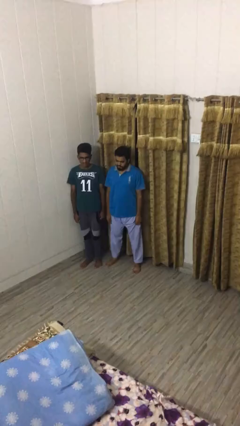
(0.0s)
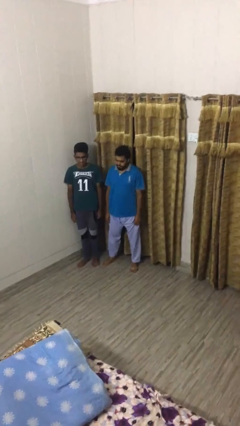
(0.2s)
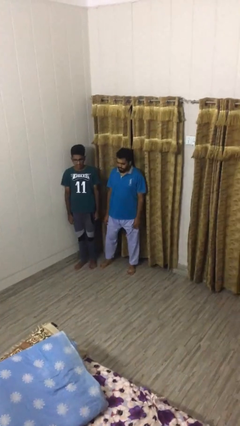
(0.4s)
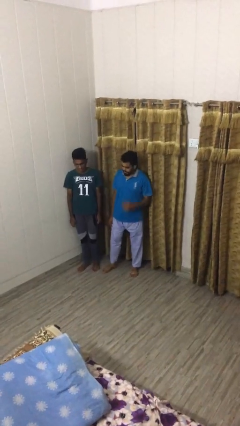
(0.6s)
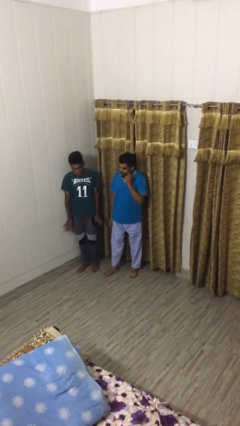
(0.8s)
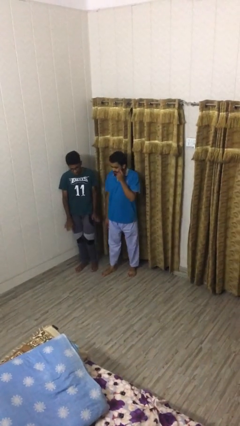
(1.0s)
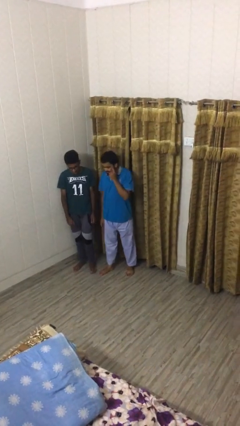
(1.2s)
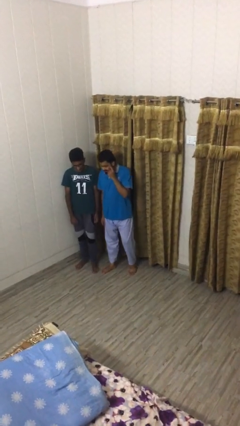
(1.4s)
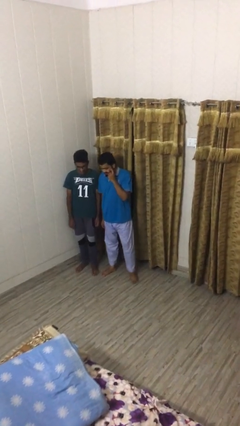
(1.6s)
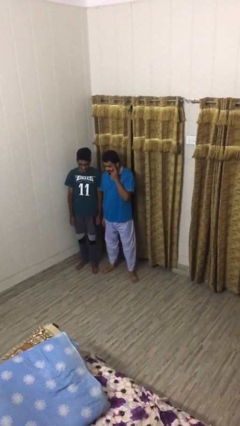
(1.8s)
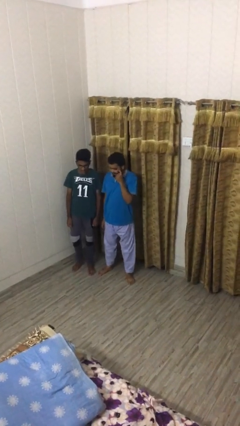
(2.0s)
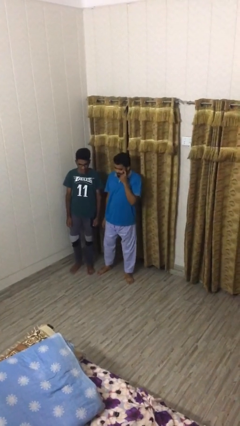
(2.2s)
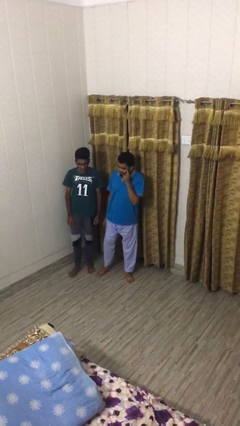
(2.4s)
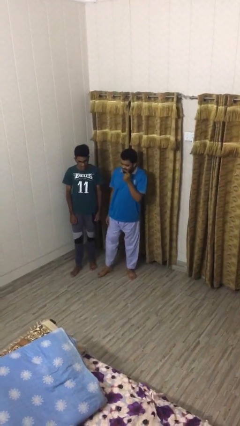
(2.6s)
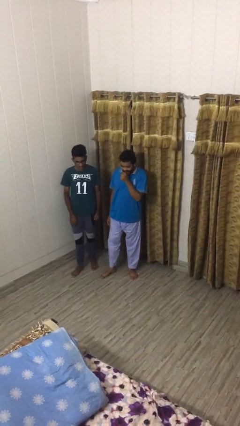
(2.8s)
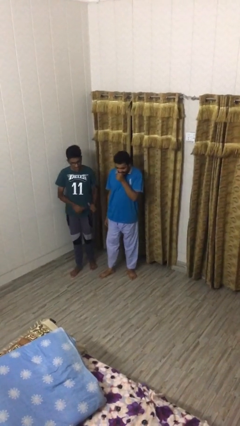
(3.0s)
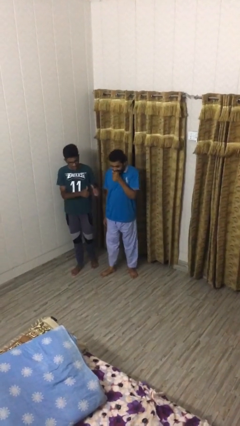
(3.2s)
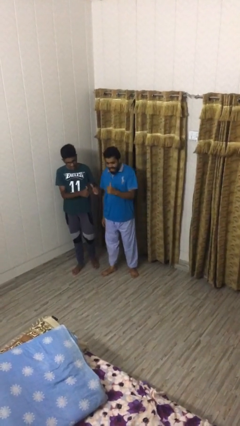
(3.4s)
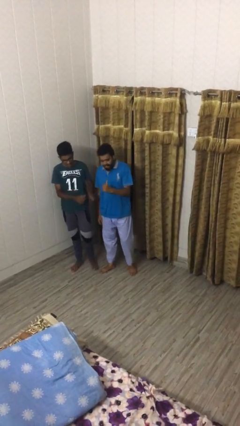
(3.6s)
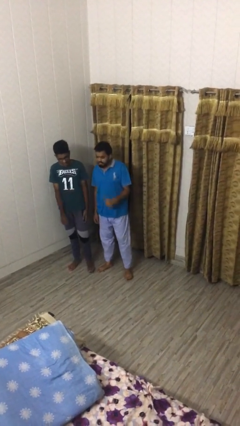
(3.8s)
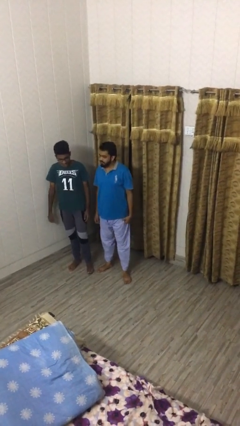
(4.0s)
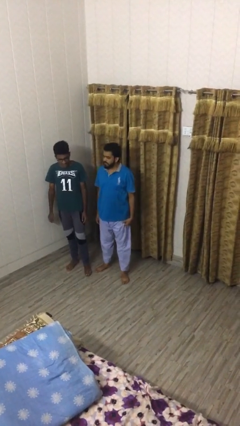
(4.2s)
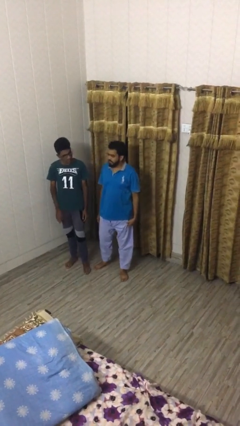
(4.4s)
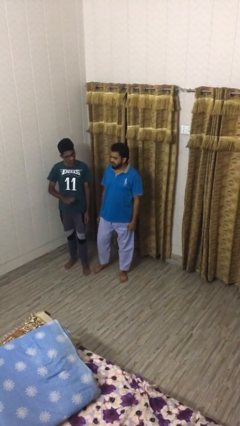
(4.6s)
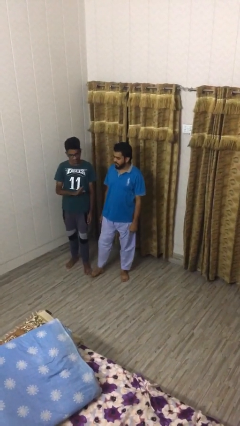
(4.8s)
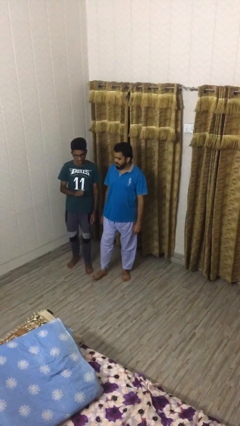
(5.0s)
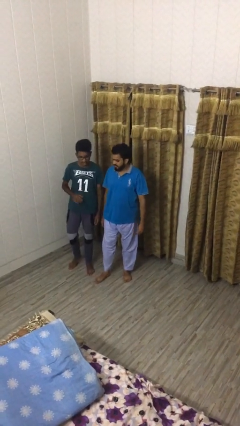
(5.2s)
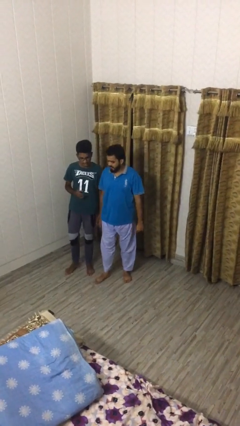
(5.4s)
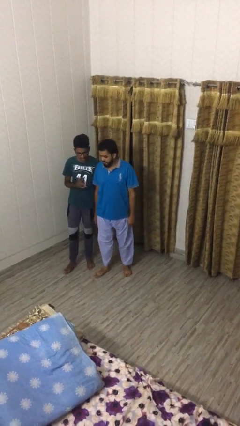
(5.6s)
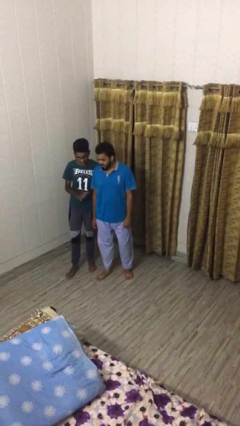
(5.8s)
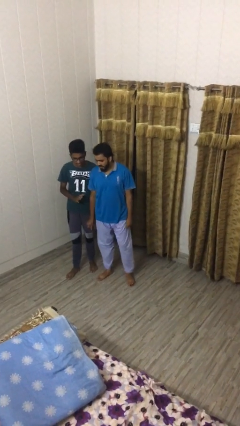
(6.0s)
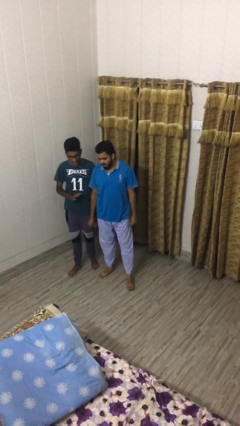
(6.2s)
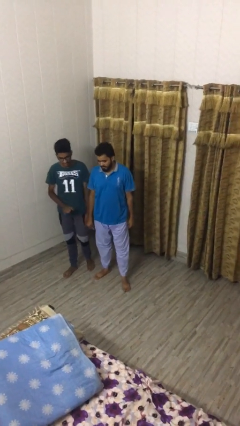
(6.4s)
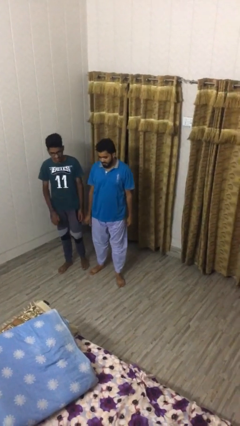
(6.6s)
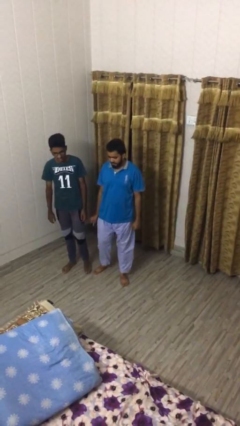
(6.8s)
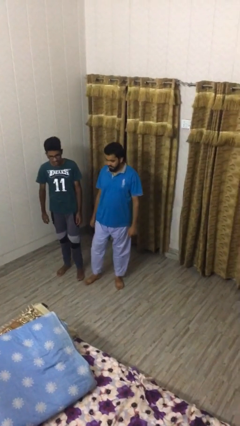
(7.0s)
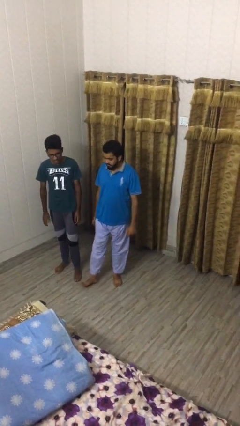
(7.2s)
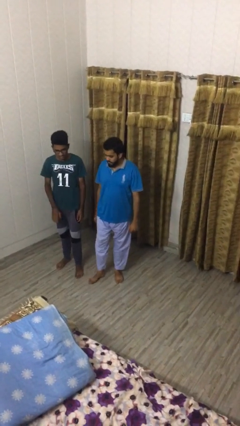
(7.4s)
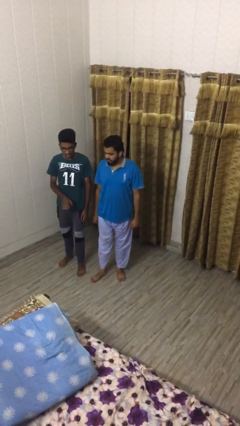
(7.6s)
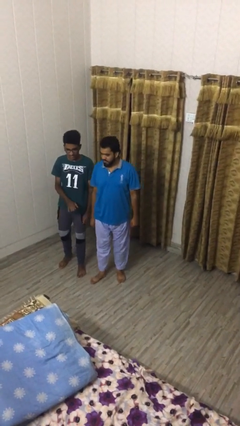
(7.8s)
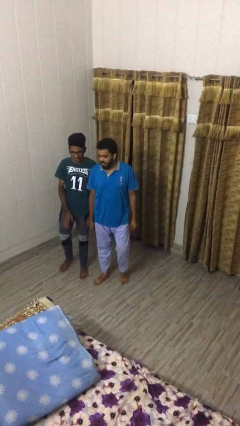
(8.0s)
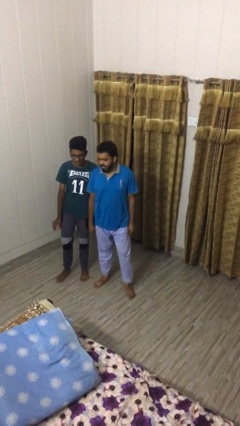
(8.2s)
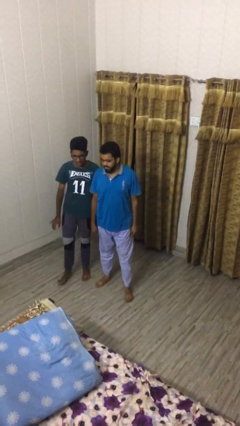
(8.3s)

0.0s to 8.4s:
person talks to person

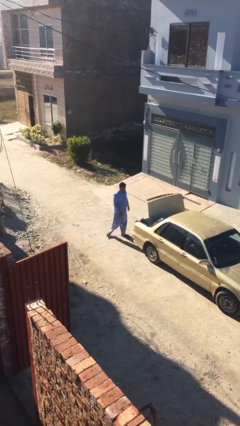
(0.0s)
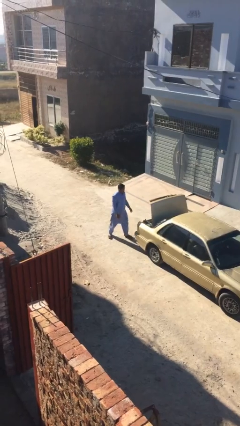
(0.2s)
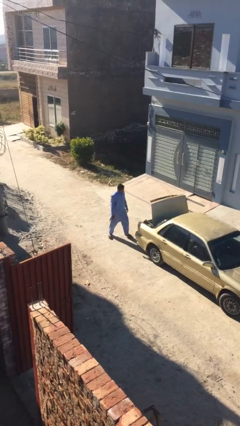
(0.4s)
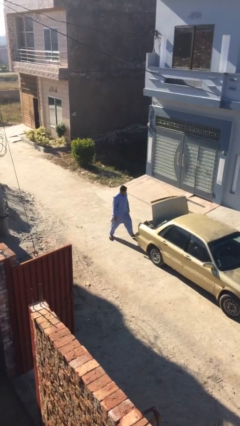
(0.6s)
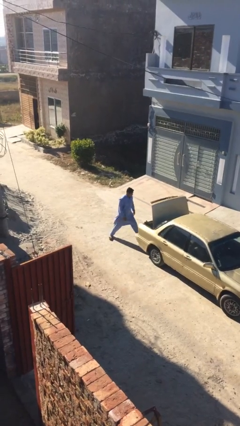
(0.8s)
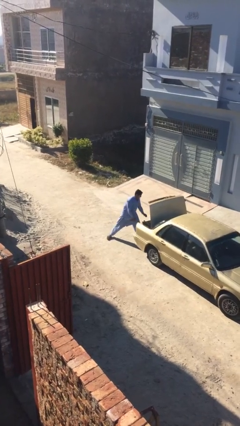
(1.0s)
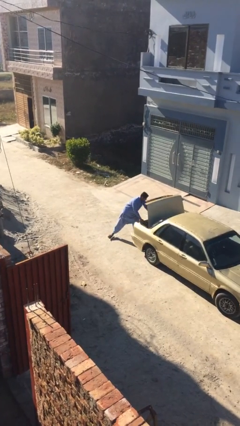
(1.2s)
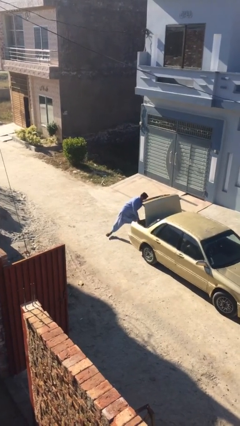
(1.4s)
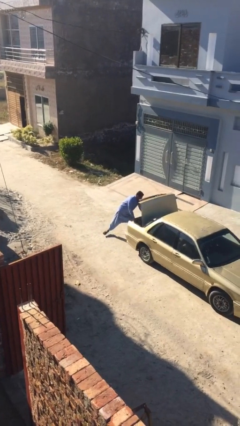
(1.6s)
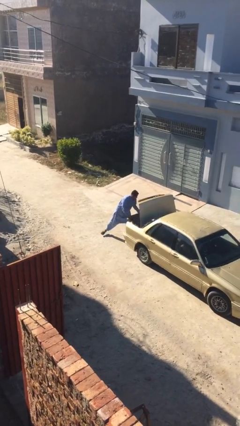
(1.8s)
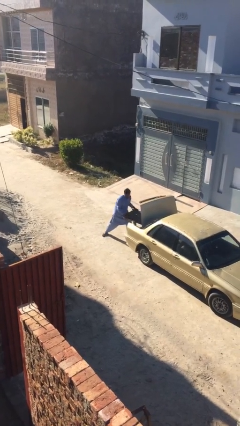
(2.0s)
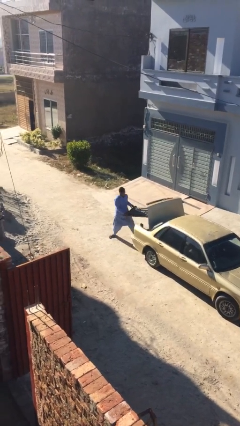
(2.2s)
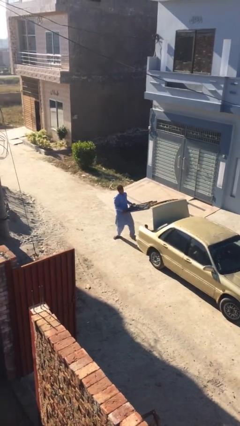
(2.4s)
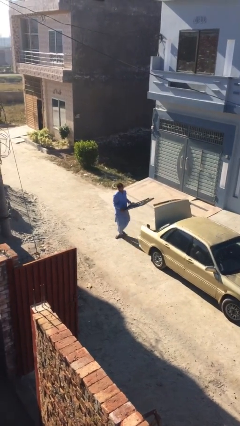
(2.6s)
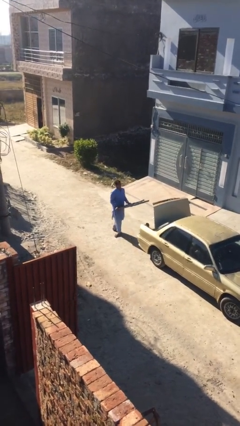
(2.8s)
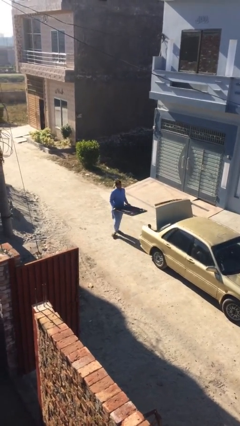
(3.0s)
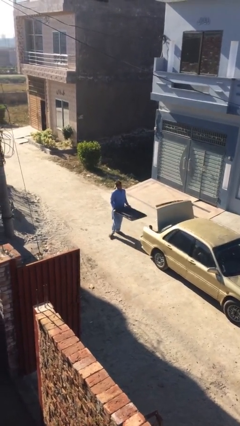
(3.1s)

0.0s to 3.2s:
person unloads car

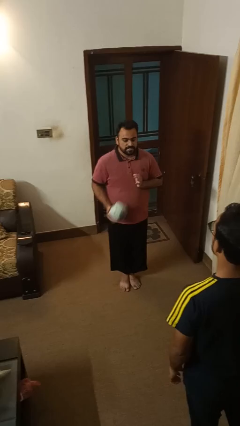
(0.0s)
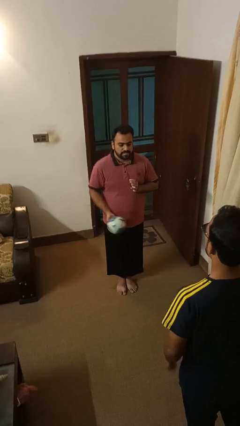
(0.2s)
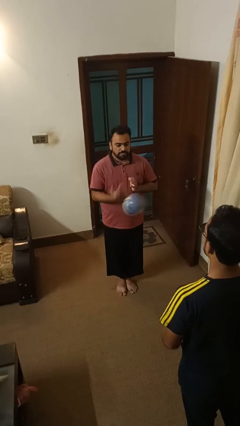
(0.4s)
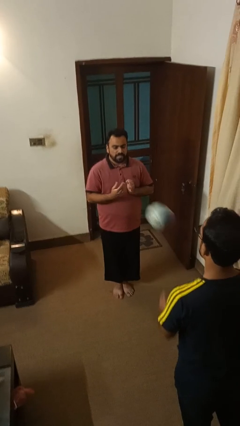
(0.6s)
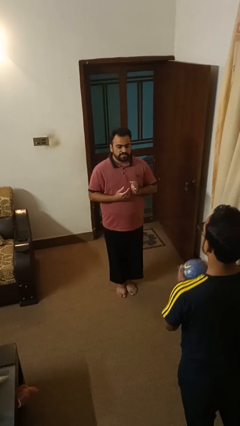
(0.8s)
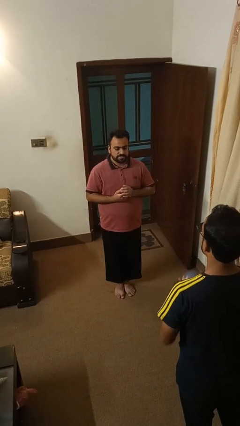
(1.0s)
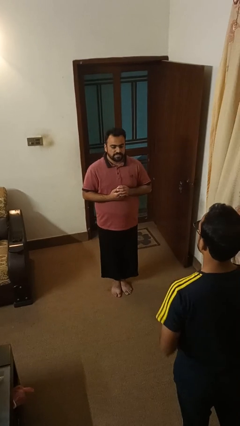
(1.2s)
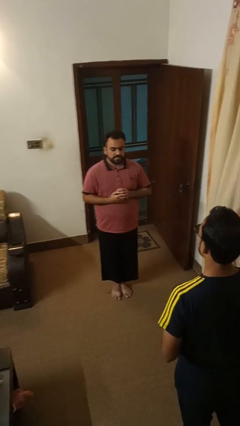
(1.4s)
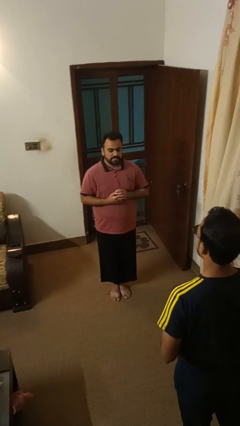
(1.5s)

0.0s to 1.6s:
person throws object to person

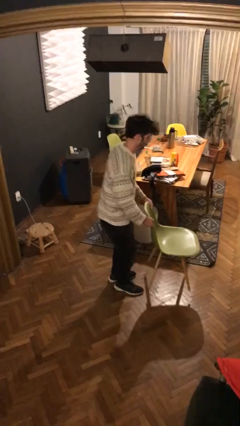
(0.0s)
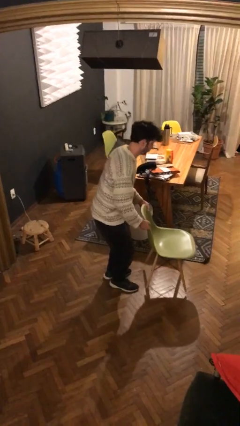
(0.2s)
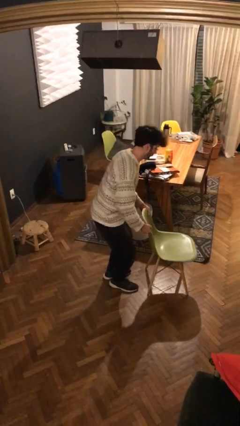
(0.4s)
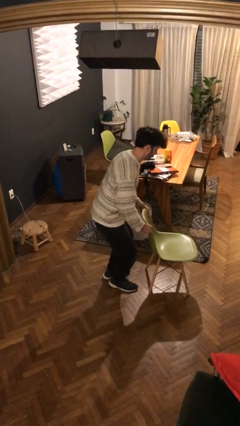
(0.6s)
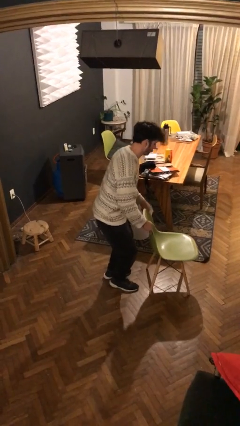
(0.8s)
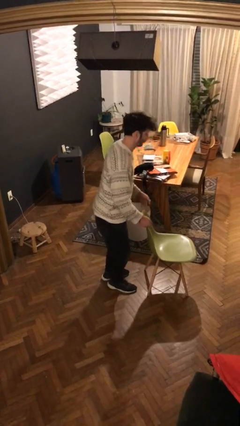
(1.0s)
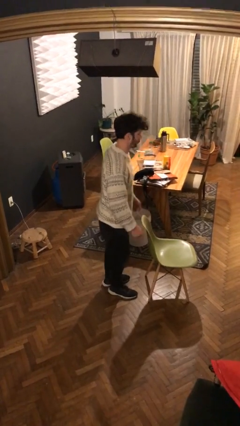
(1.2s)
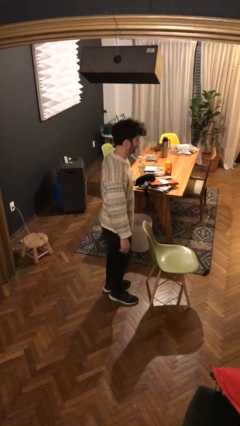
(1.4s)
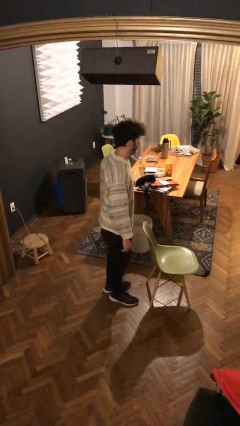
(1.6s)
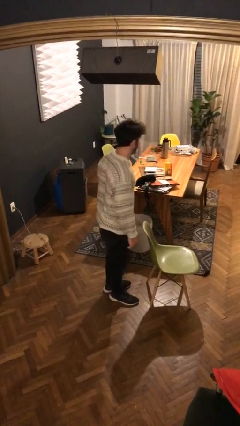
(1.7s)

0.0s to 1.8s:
person puts down object on floor

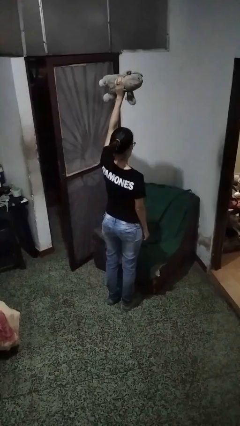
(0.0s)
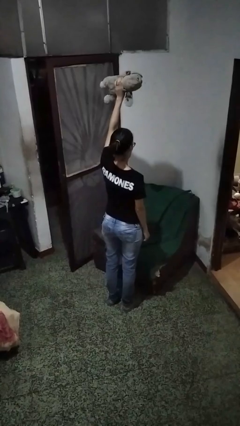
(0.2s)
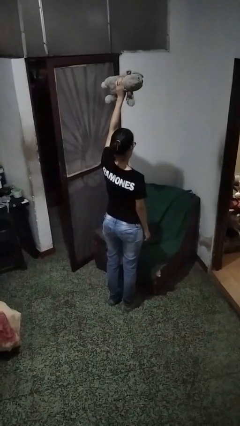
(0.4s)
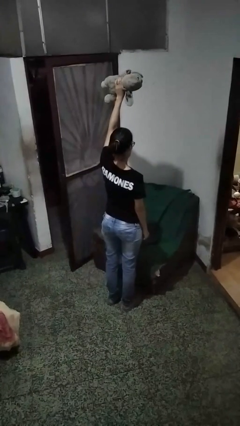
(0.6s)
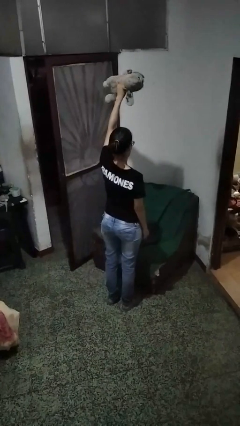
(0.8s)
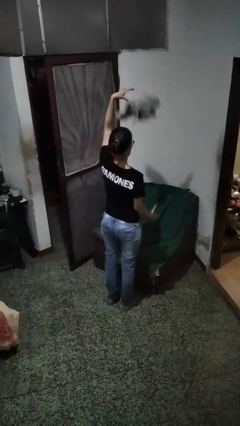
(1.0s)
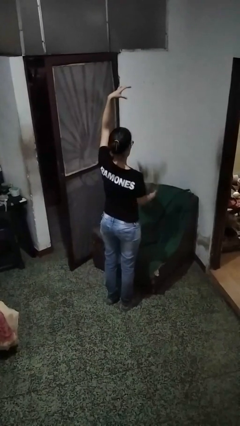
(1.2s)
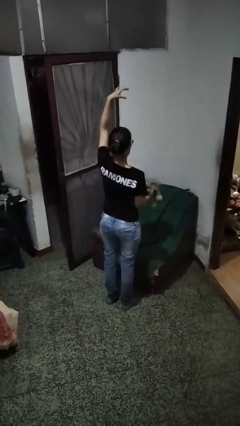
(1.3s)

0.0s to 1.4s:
person drops object

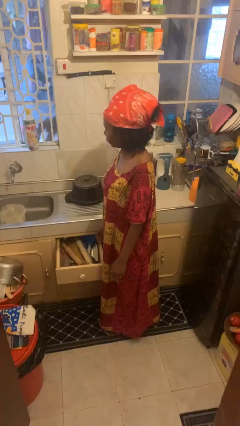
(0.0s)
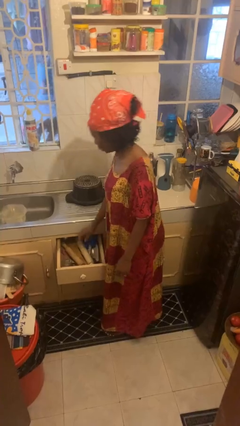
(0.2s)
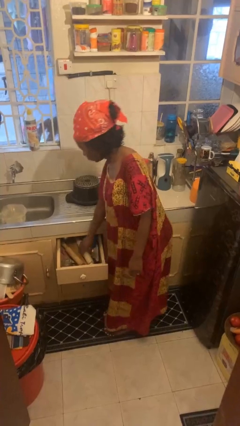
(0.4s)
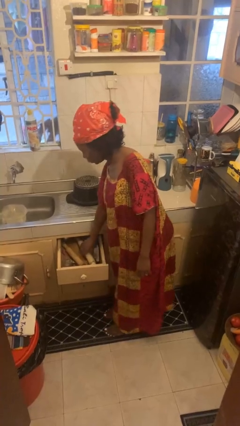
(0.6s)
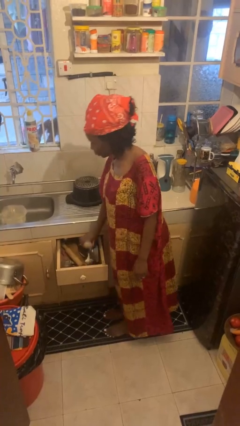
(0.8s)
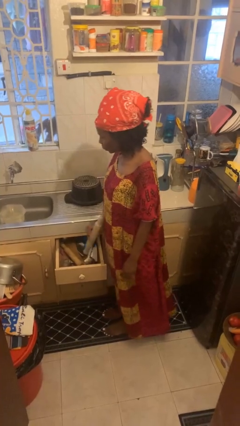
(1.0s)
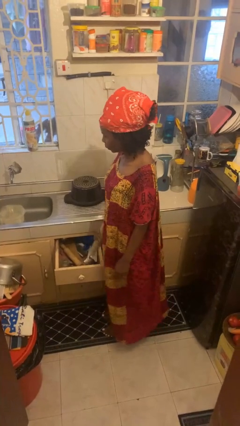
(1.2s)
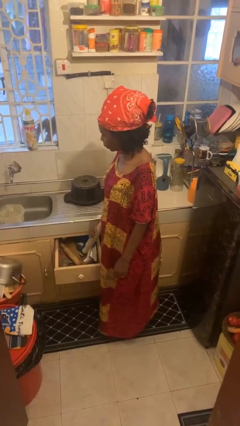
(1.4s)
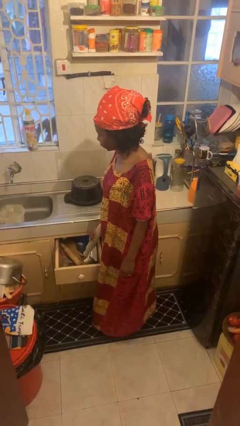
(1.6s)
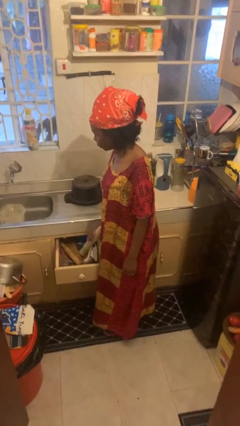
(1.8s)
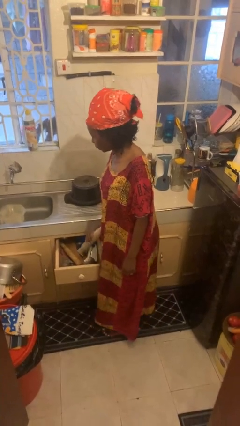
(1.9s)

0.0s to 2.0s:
person takes object from kitchen drawer
